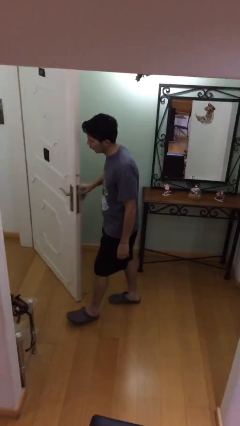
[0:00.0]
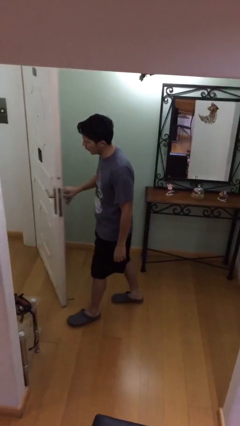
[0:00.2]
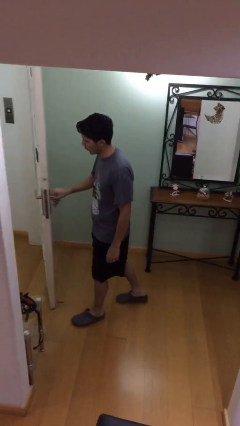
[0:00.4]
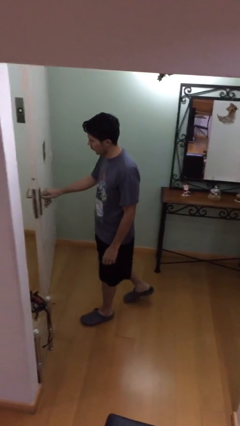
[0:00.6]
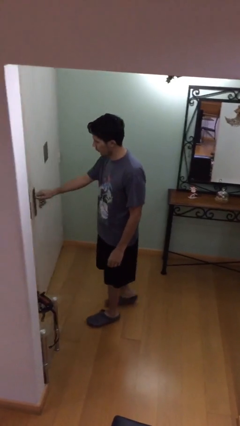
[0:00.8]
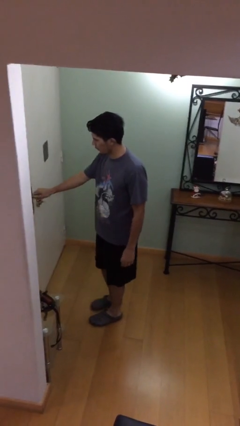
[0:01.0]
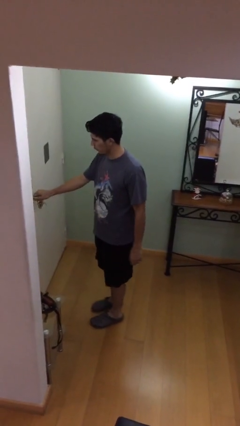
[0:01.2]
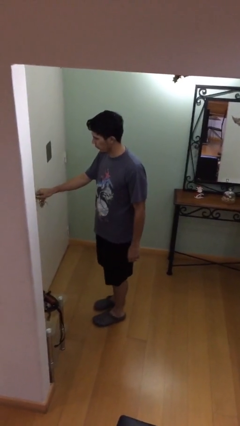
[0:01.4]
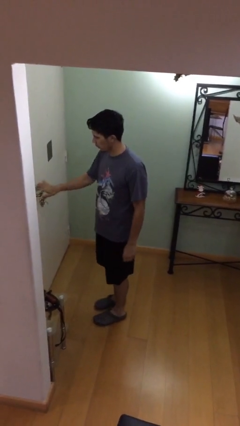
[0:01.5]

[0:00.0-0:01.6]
person closes facility door

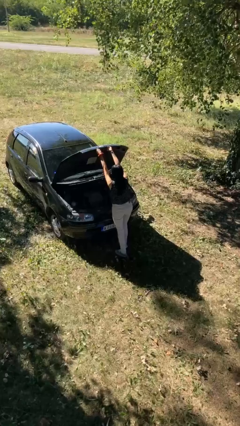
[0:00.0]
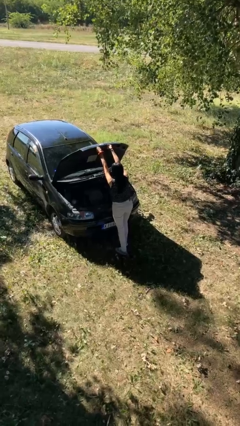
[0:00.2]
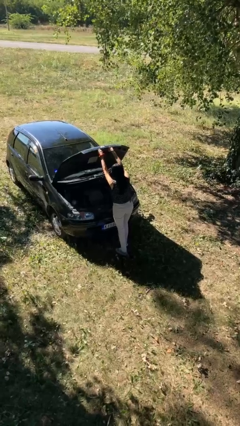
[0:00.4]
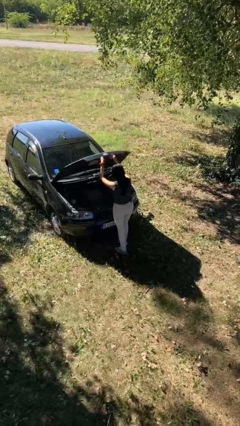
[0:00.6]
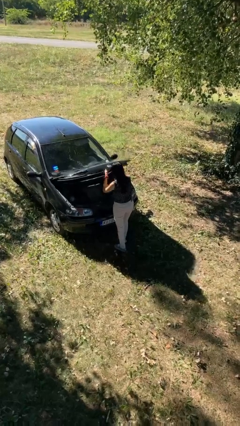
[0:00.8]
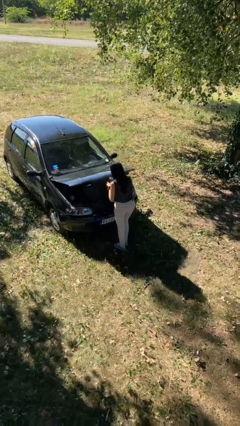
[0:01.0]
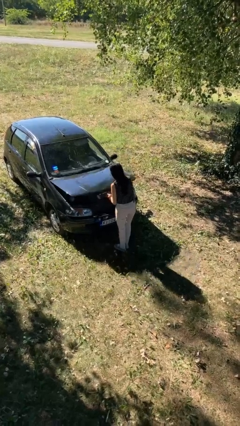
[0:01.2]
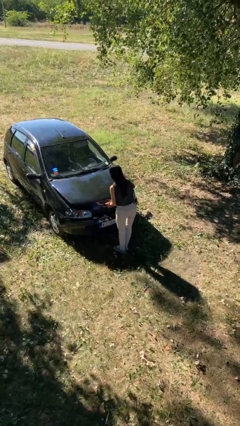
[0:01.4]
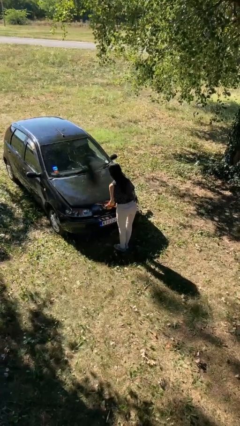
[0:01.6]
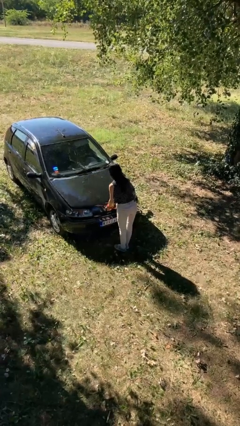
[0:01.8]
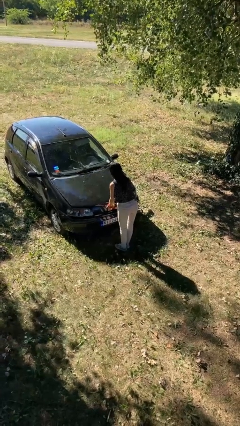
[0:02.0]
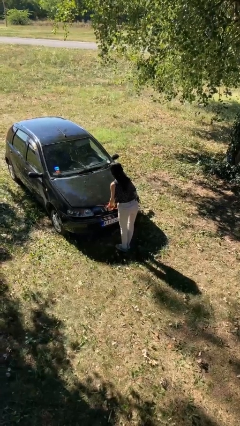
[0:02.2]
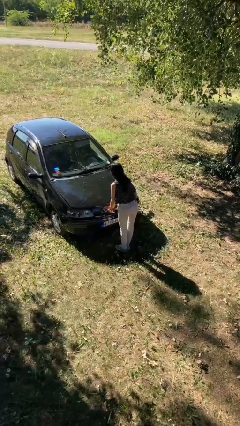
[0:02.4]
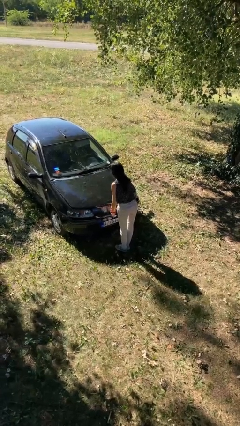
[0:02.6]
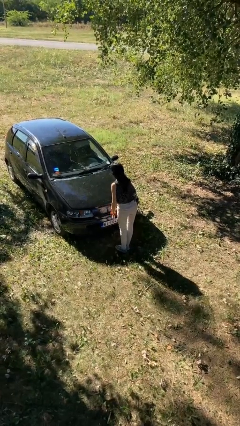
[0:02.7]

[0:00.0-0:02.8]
person closes car hood

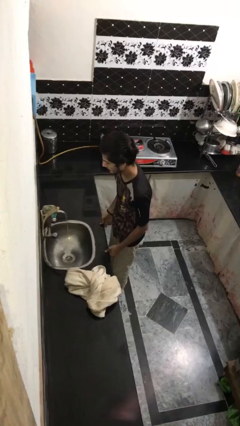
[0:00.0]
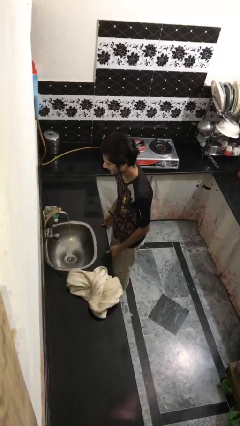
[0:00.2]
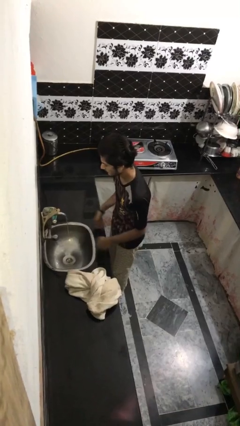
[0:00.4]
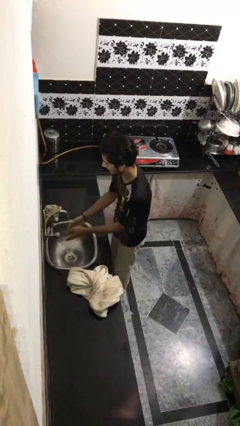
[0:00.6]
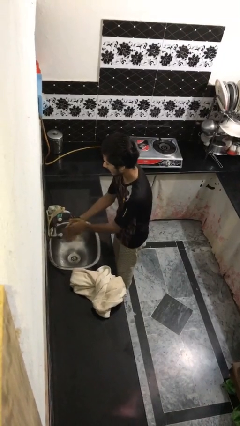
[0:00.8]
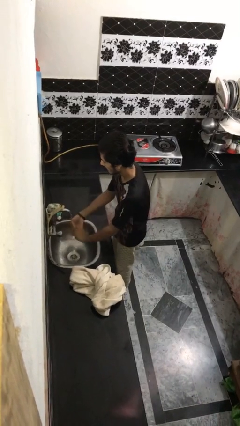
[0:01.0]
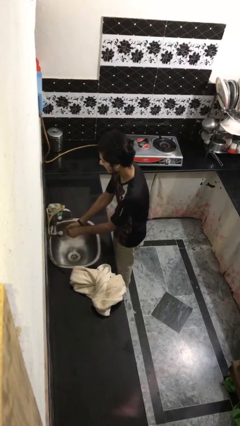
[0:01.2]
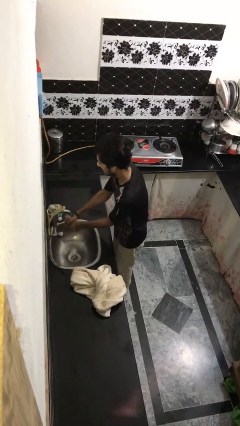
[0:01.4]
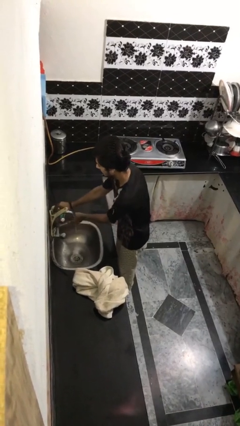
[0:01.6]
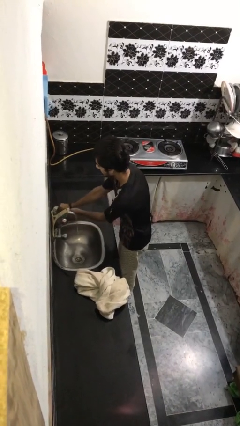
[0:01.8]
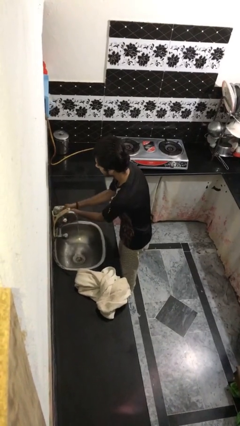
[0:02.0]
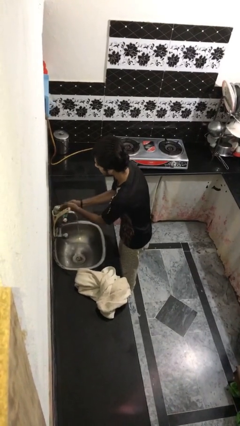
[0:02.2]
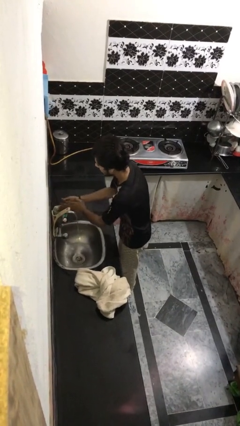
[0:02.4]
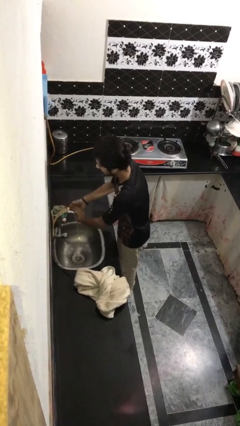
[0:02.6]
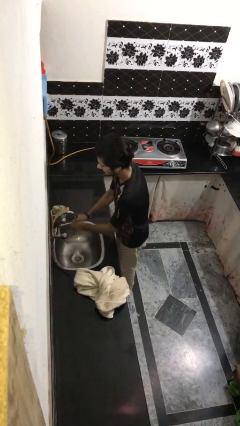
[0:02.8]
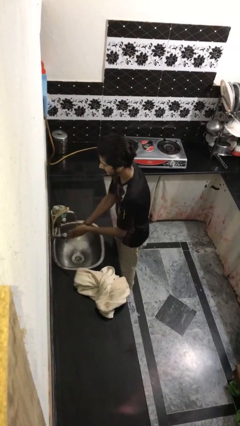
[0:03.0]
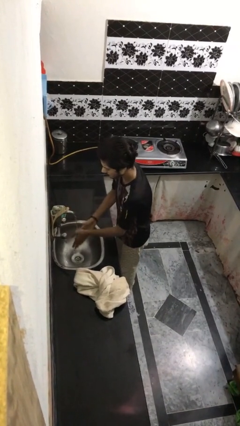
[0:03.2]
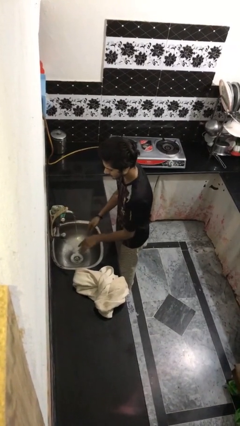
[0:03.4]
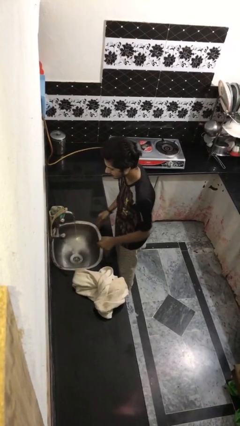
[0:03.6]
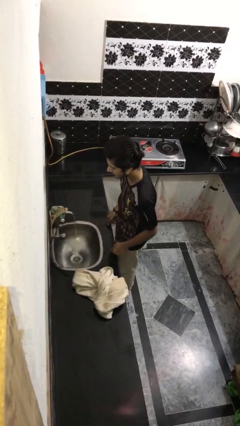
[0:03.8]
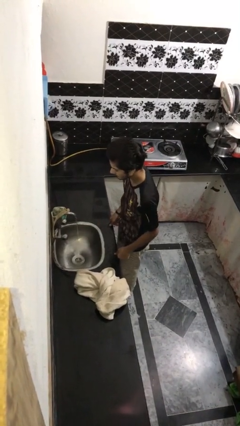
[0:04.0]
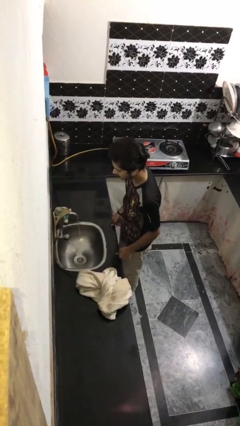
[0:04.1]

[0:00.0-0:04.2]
person washes face

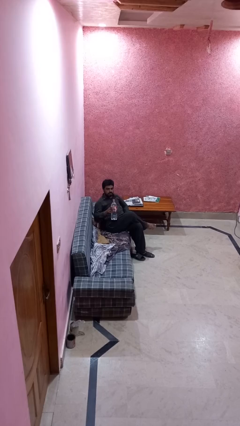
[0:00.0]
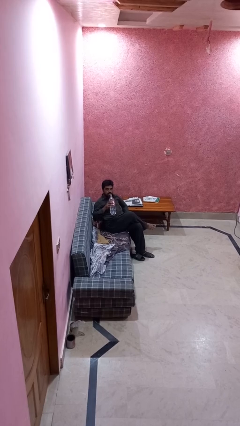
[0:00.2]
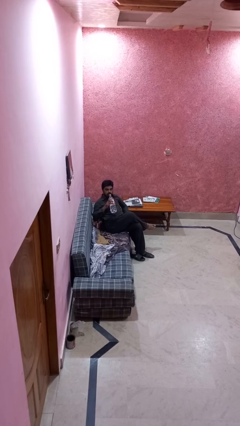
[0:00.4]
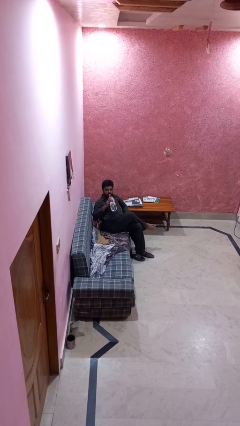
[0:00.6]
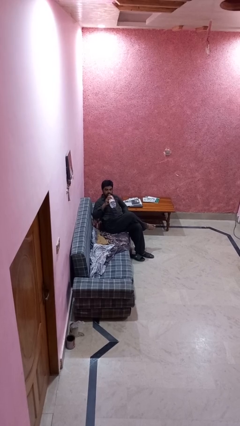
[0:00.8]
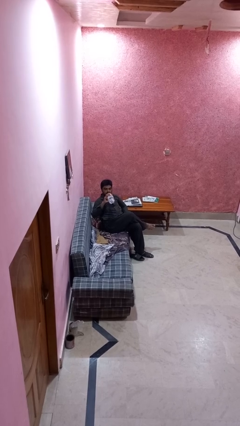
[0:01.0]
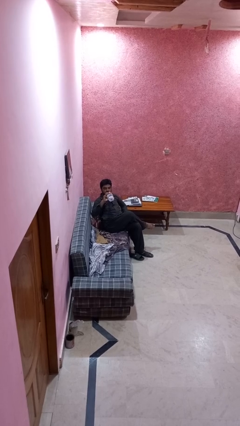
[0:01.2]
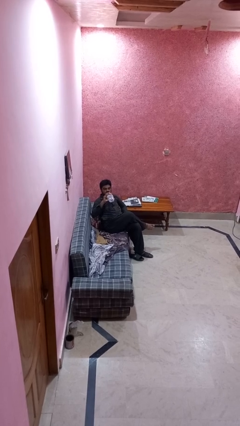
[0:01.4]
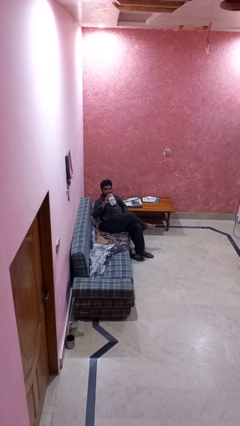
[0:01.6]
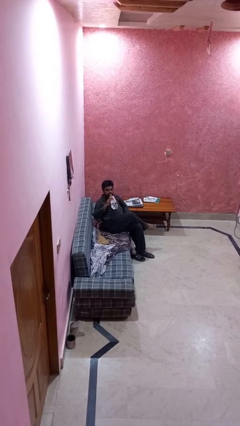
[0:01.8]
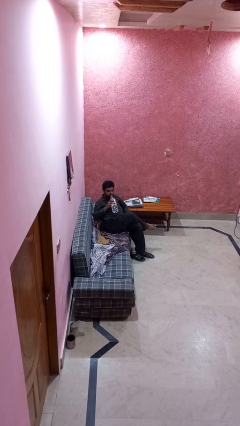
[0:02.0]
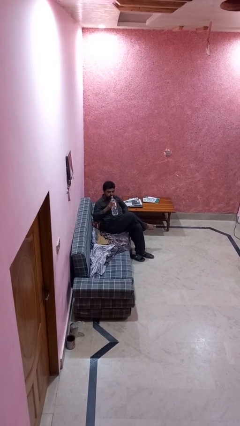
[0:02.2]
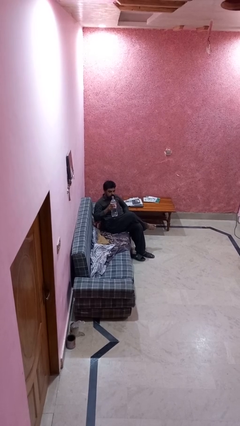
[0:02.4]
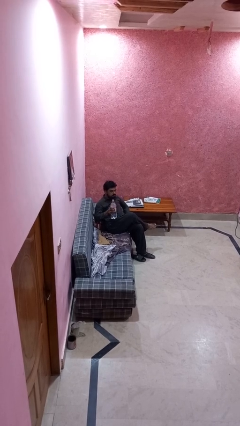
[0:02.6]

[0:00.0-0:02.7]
person drinks from bottle

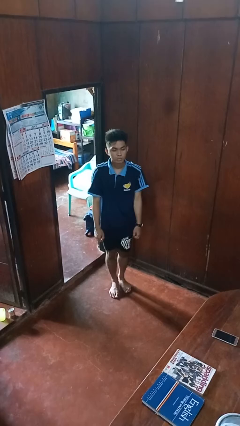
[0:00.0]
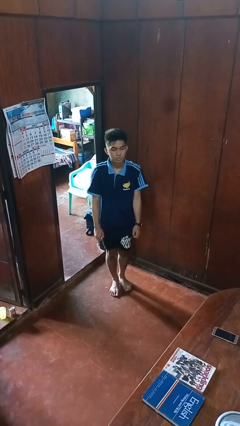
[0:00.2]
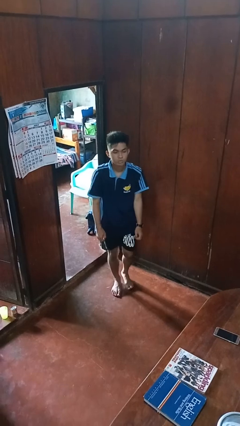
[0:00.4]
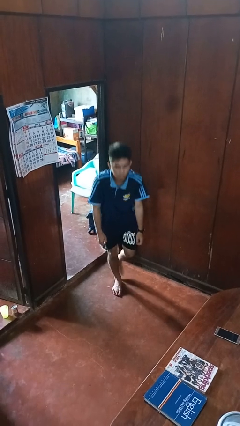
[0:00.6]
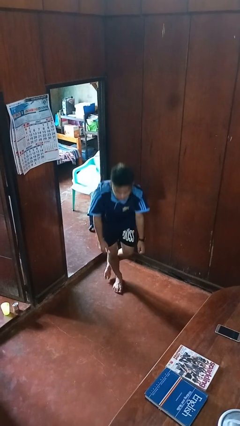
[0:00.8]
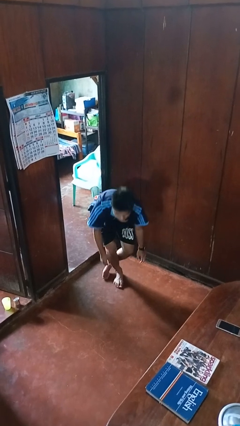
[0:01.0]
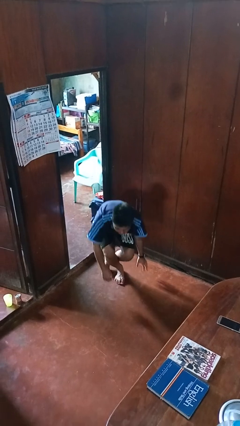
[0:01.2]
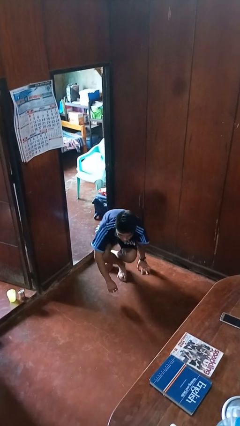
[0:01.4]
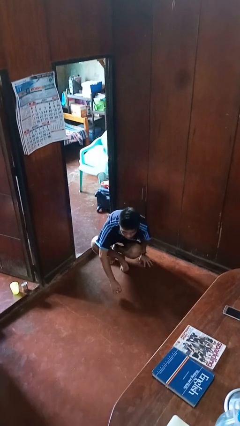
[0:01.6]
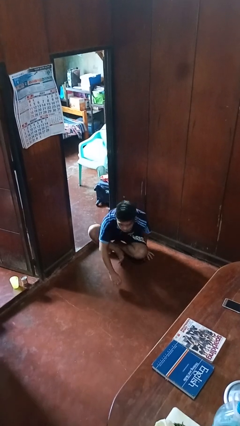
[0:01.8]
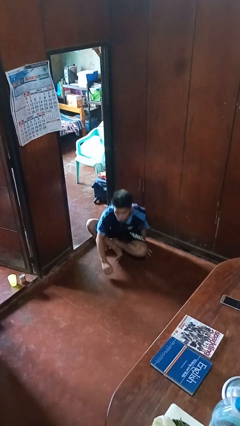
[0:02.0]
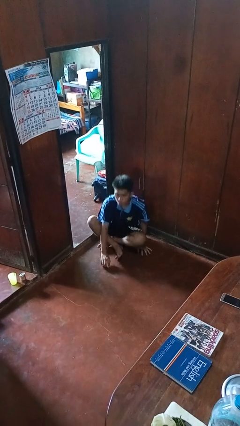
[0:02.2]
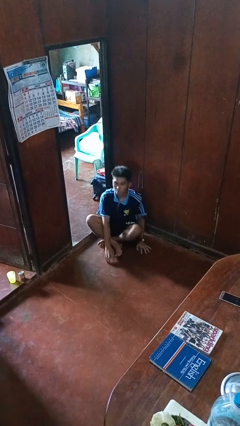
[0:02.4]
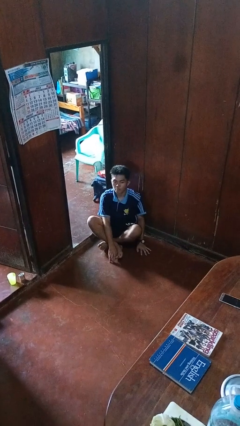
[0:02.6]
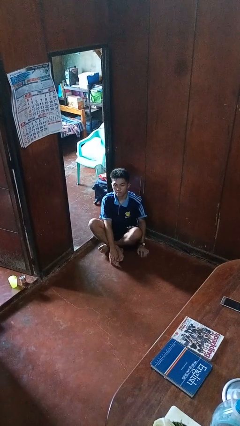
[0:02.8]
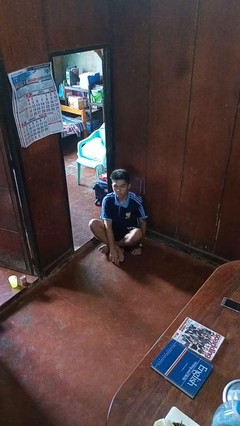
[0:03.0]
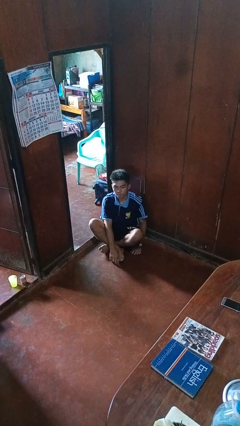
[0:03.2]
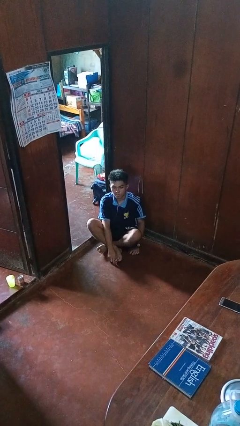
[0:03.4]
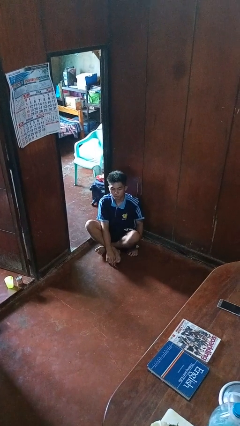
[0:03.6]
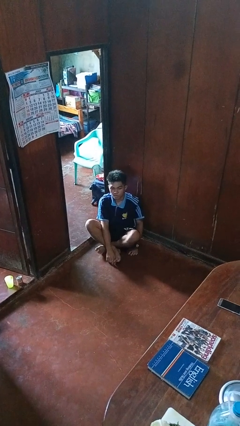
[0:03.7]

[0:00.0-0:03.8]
person sits crisscross

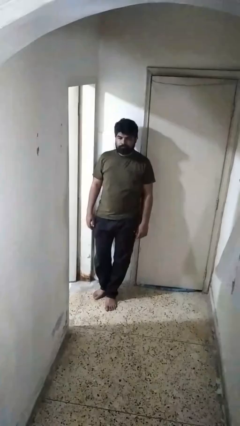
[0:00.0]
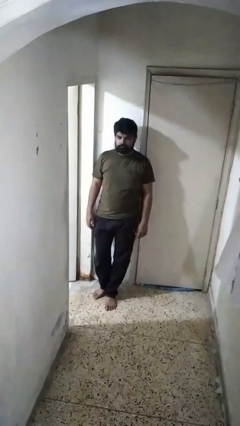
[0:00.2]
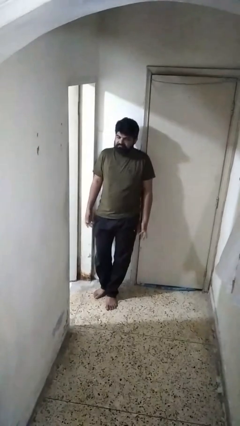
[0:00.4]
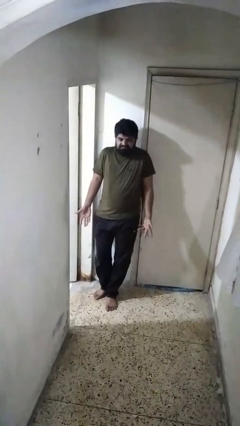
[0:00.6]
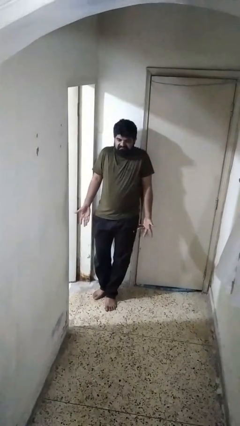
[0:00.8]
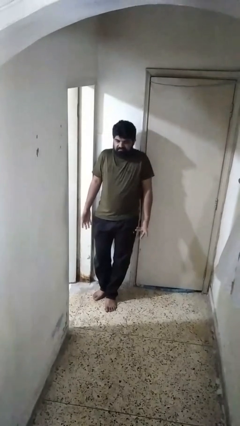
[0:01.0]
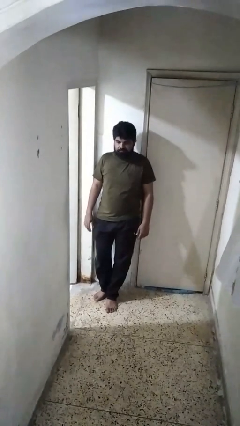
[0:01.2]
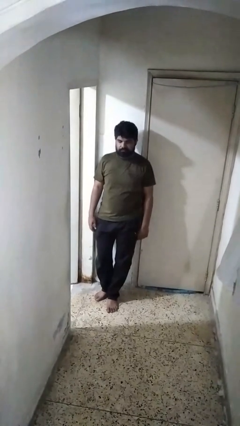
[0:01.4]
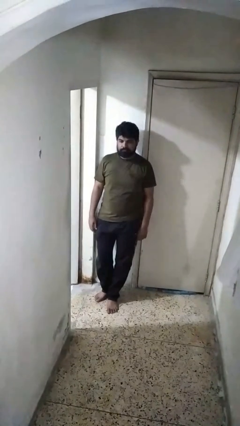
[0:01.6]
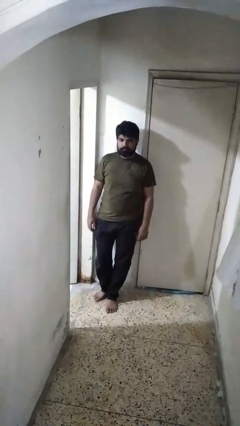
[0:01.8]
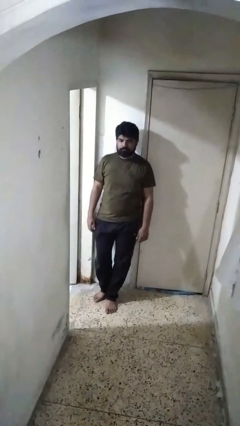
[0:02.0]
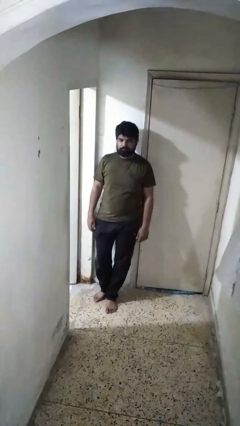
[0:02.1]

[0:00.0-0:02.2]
person shrugs
